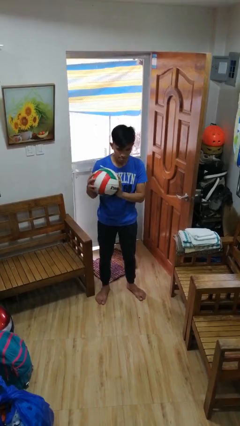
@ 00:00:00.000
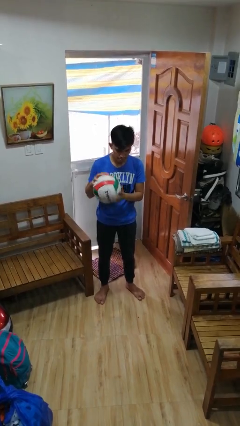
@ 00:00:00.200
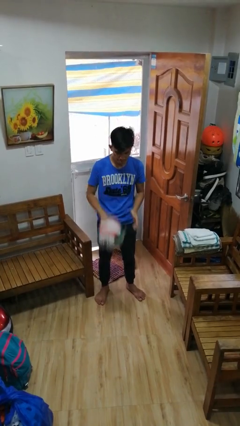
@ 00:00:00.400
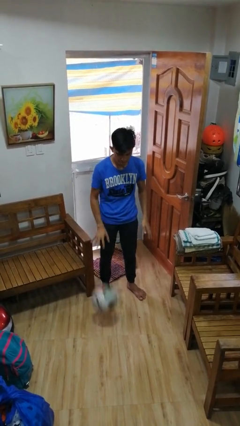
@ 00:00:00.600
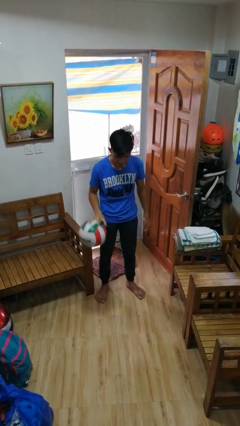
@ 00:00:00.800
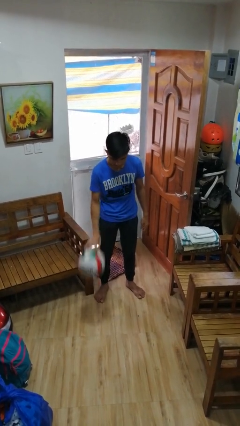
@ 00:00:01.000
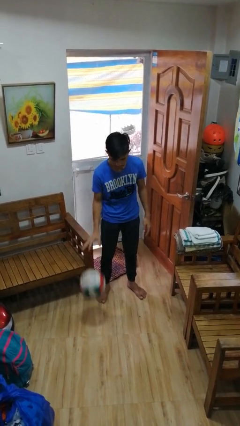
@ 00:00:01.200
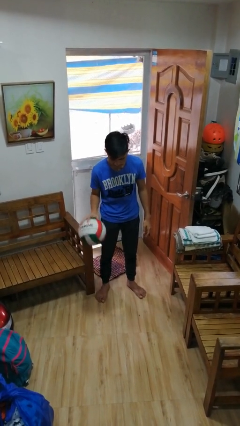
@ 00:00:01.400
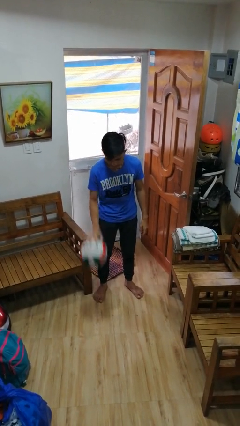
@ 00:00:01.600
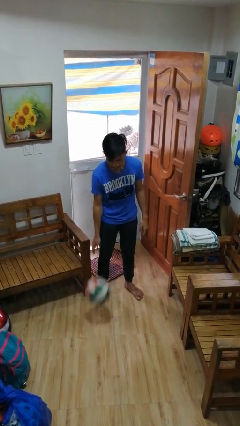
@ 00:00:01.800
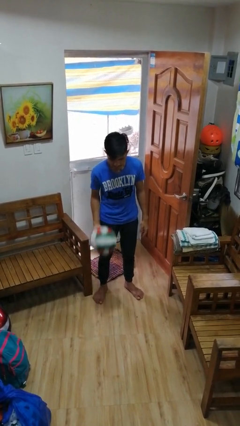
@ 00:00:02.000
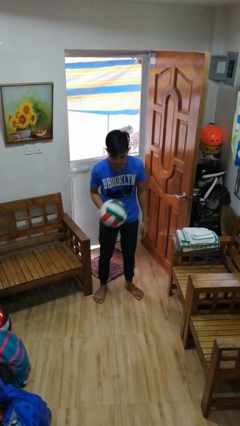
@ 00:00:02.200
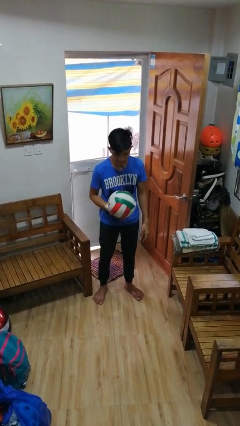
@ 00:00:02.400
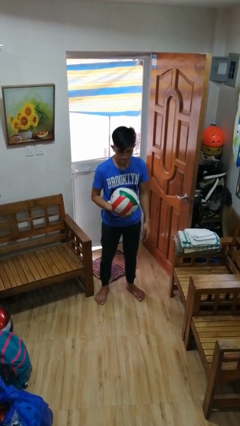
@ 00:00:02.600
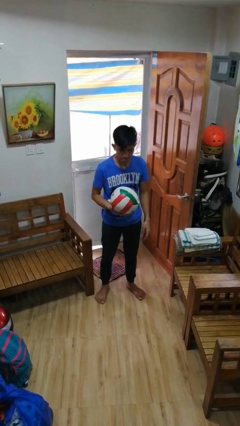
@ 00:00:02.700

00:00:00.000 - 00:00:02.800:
person bounces ball on floor

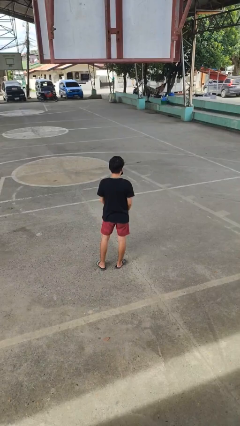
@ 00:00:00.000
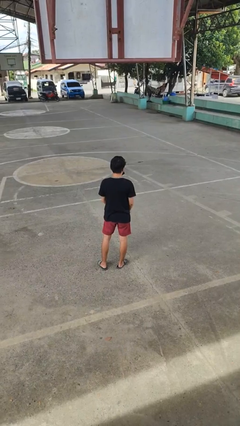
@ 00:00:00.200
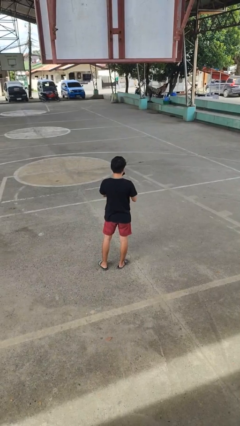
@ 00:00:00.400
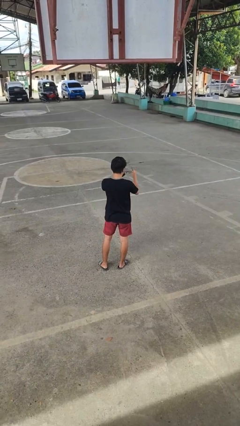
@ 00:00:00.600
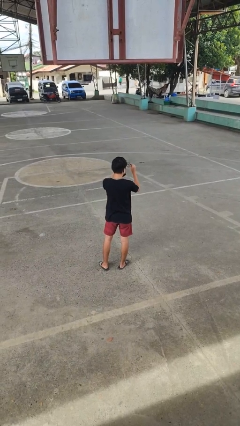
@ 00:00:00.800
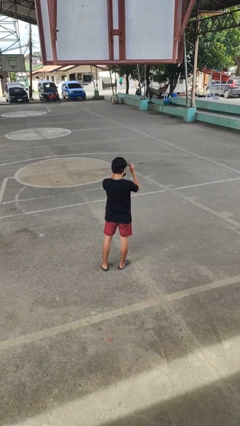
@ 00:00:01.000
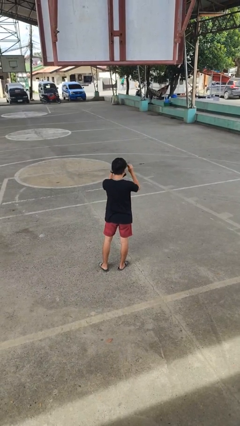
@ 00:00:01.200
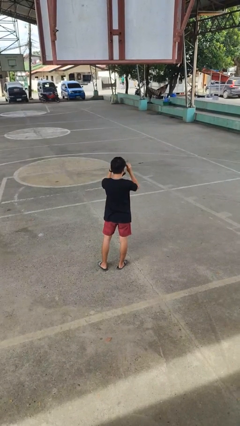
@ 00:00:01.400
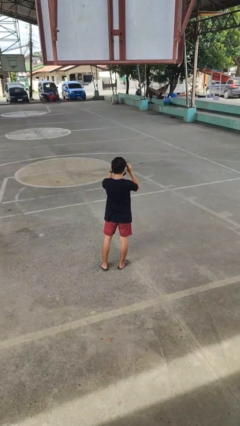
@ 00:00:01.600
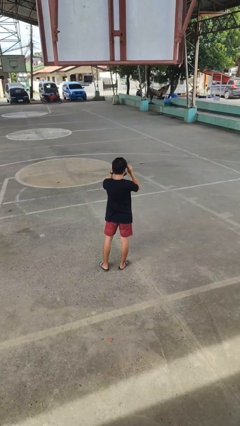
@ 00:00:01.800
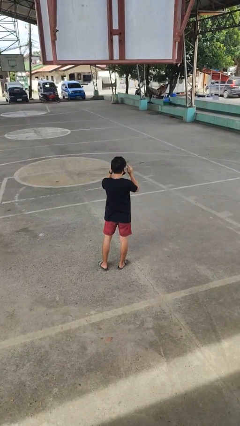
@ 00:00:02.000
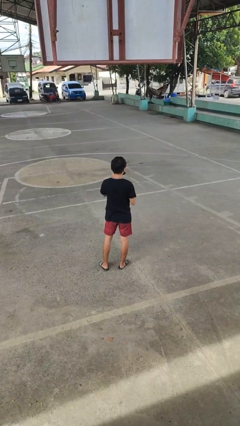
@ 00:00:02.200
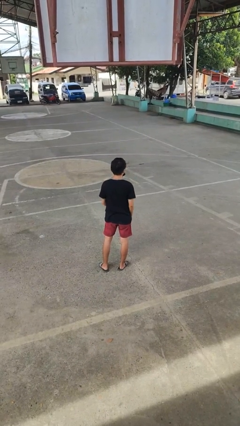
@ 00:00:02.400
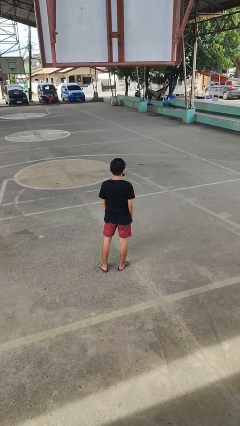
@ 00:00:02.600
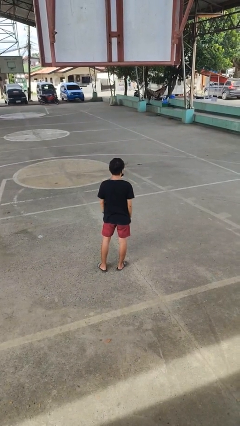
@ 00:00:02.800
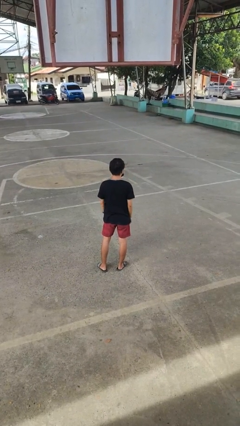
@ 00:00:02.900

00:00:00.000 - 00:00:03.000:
person puts on glasses

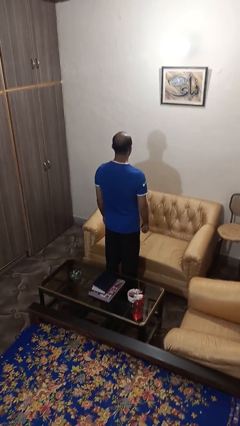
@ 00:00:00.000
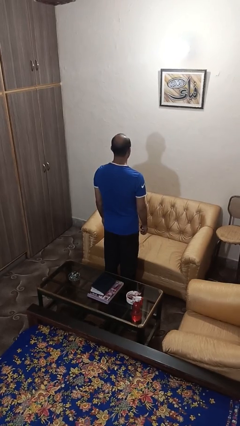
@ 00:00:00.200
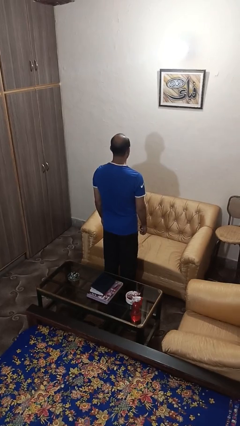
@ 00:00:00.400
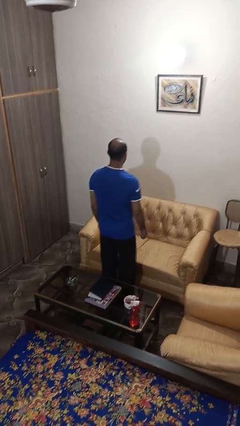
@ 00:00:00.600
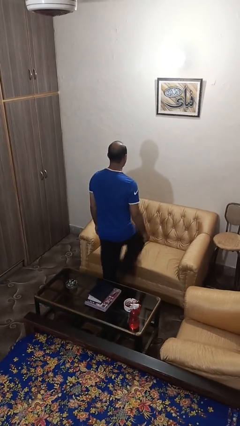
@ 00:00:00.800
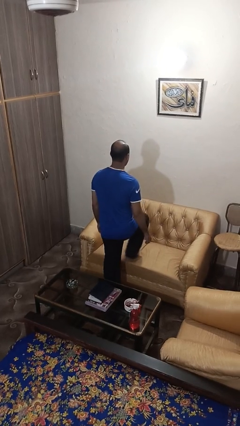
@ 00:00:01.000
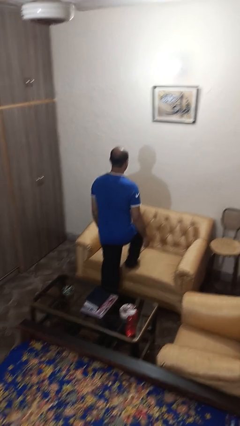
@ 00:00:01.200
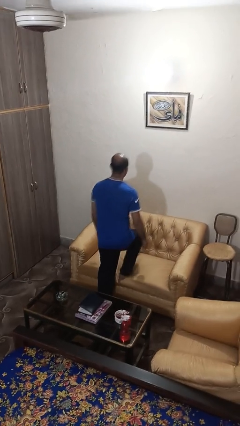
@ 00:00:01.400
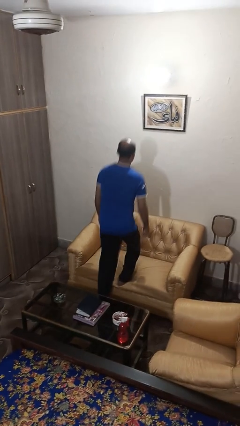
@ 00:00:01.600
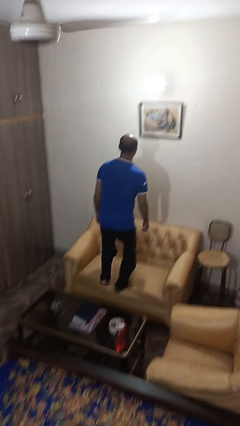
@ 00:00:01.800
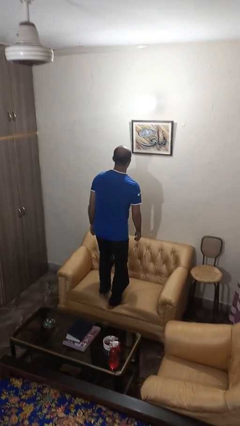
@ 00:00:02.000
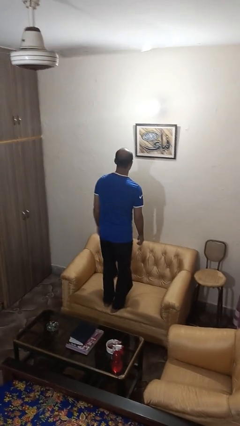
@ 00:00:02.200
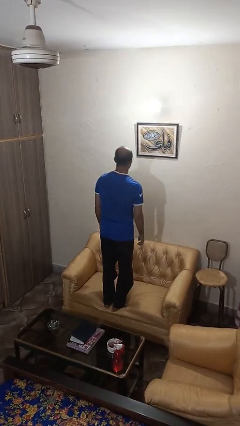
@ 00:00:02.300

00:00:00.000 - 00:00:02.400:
person climbs on couch

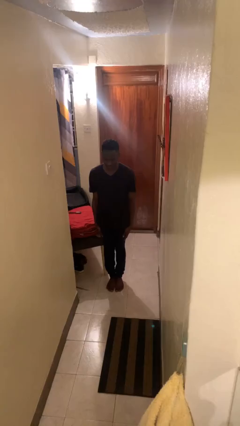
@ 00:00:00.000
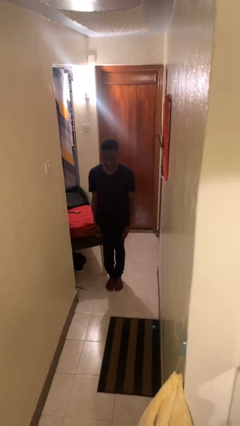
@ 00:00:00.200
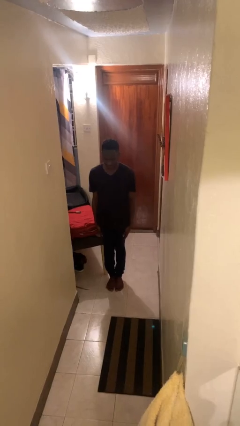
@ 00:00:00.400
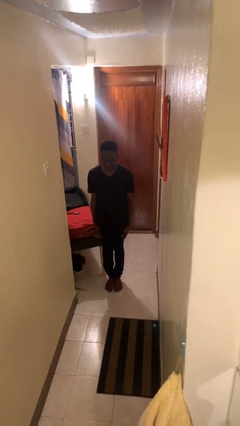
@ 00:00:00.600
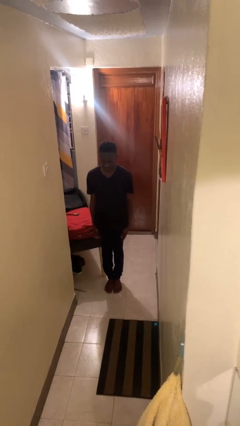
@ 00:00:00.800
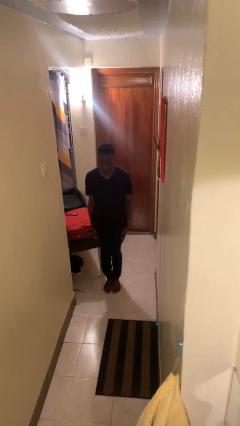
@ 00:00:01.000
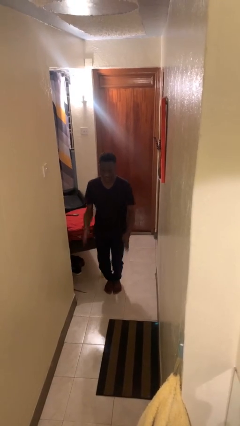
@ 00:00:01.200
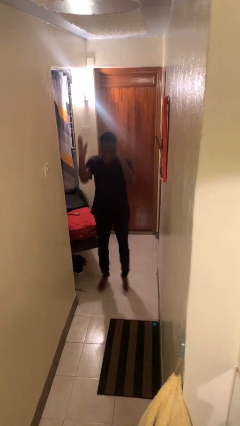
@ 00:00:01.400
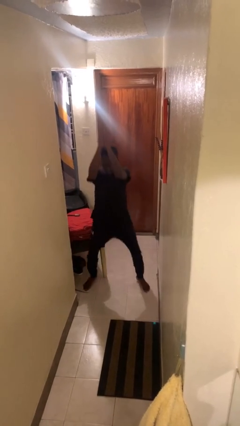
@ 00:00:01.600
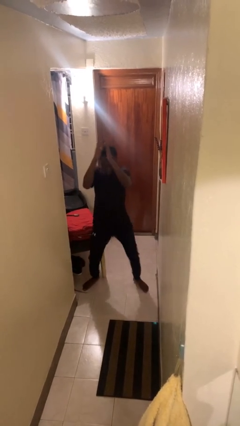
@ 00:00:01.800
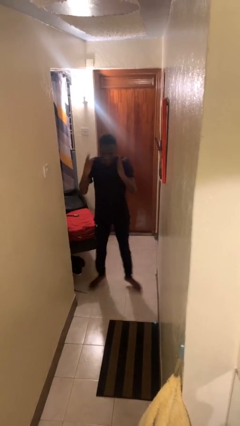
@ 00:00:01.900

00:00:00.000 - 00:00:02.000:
person exercises with jumping jacks

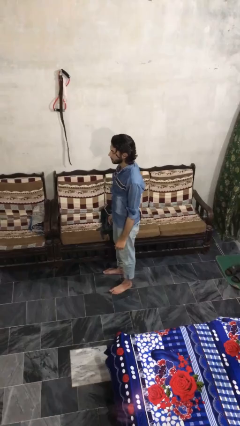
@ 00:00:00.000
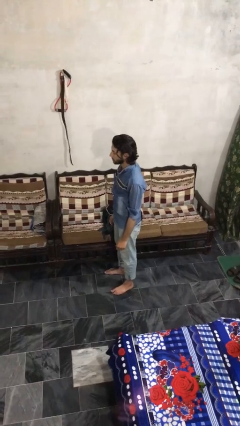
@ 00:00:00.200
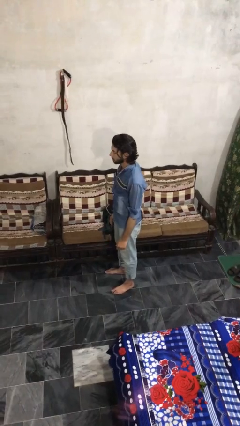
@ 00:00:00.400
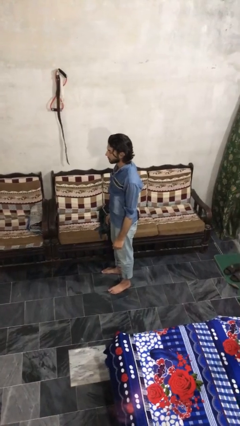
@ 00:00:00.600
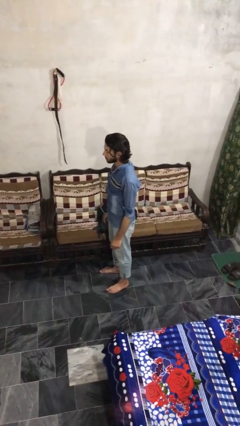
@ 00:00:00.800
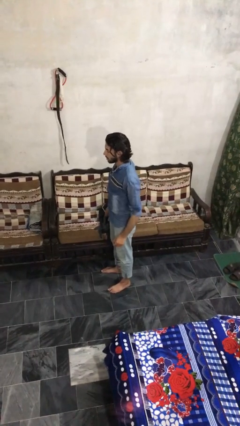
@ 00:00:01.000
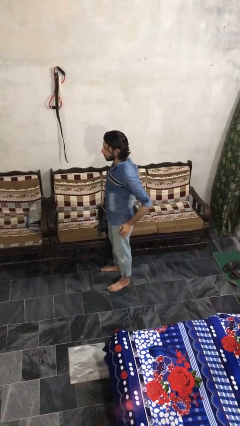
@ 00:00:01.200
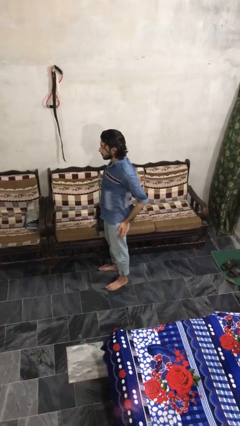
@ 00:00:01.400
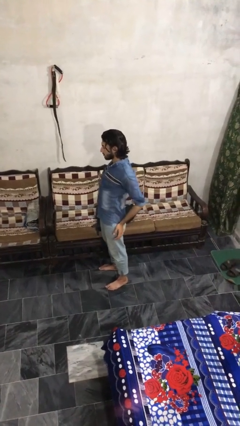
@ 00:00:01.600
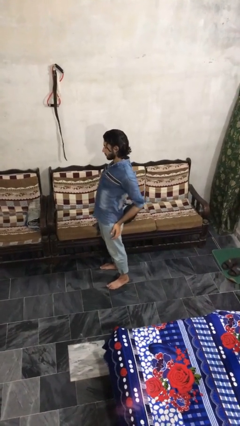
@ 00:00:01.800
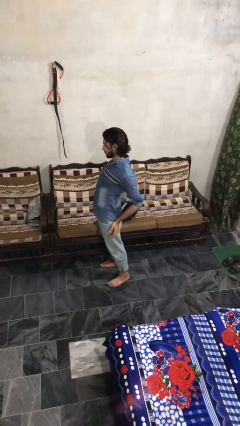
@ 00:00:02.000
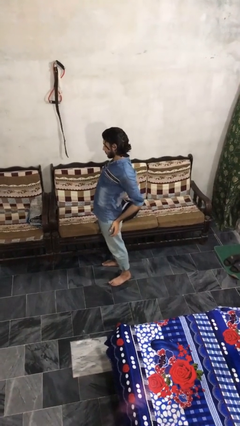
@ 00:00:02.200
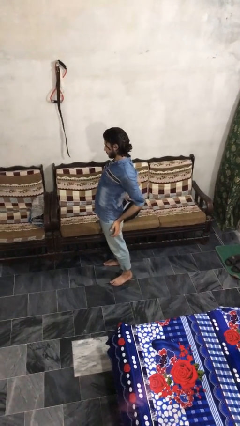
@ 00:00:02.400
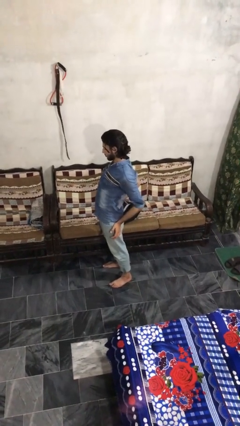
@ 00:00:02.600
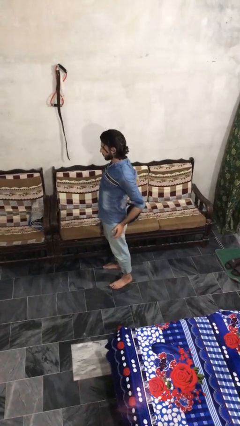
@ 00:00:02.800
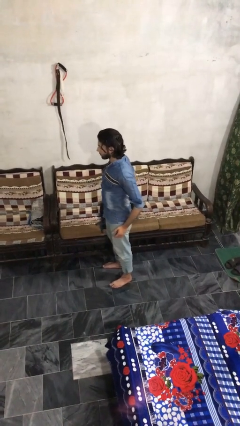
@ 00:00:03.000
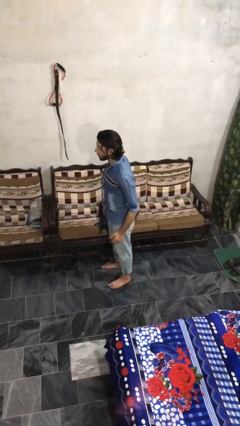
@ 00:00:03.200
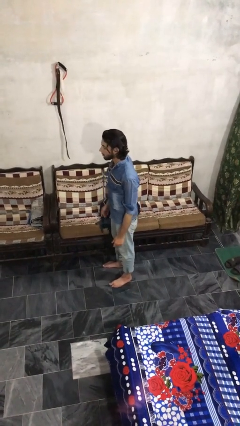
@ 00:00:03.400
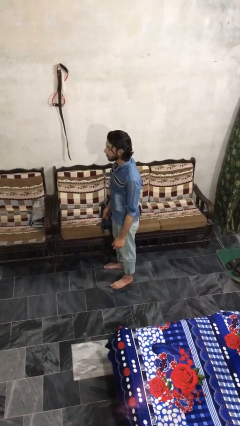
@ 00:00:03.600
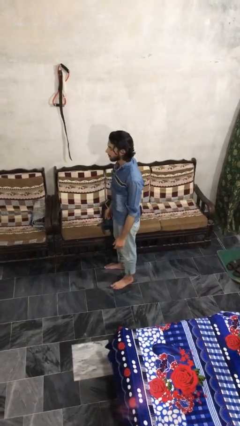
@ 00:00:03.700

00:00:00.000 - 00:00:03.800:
person stretches back

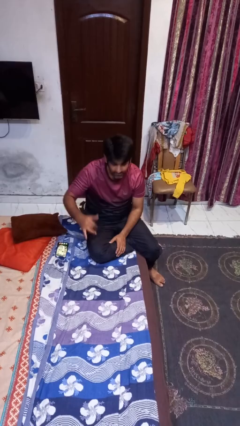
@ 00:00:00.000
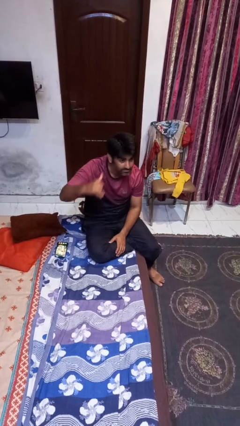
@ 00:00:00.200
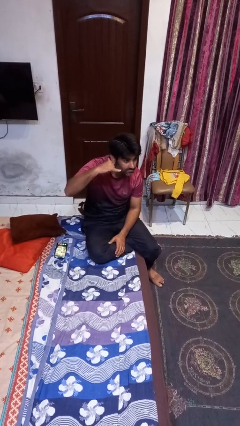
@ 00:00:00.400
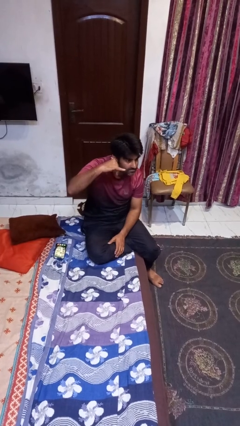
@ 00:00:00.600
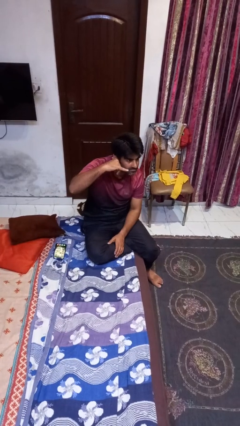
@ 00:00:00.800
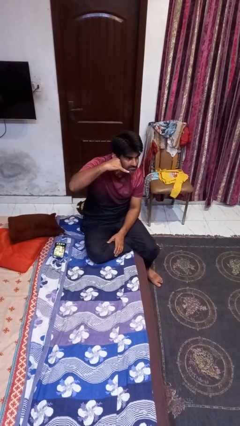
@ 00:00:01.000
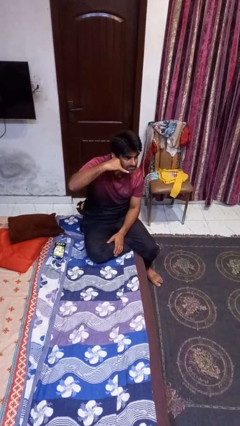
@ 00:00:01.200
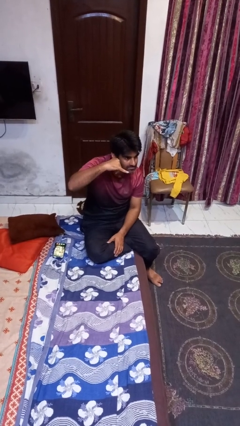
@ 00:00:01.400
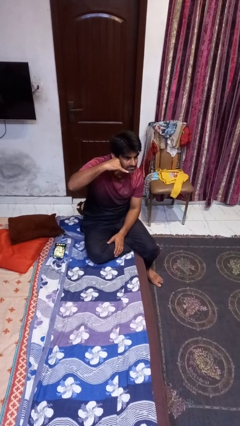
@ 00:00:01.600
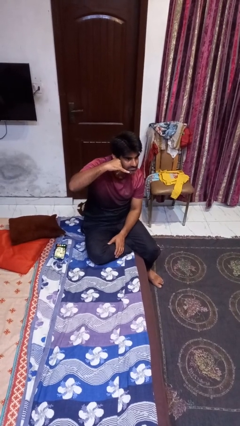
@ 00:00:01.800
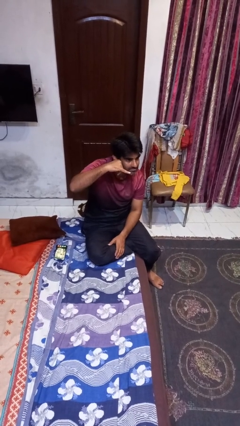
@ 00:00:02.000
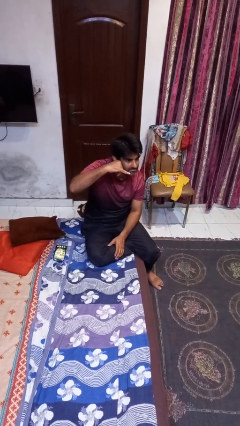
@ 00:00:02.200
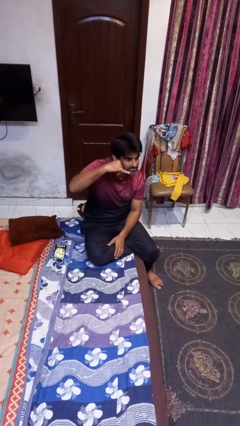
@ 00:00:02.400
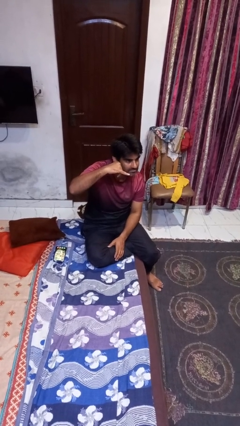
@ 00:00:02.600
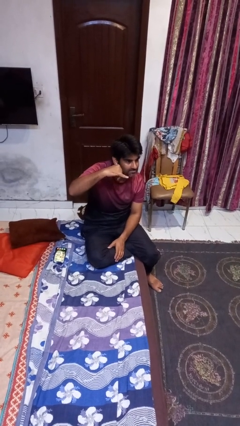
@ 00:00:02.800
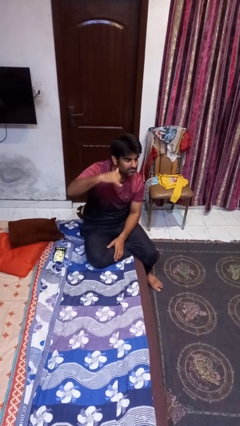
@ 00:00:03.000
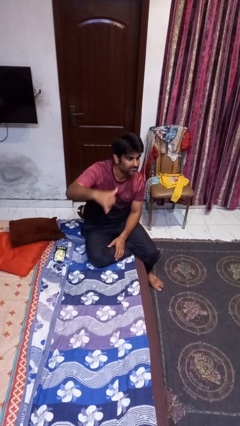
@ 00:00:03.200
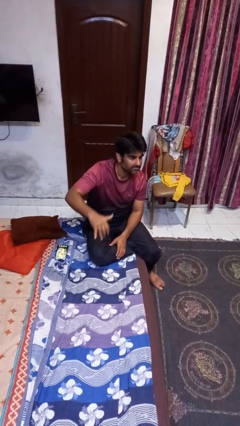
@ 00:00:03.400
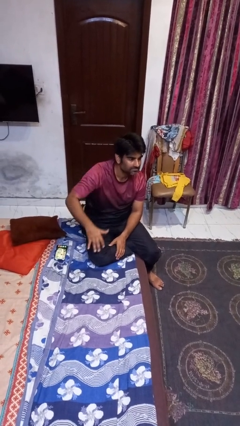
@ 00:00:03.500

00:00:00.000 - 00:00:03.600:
person gestures call me
